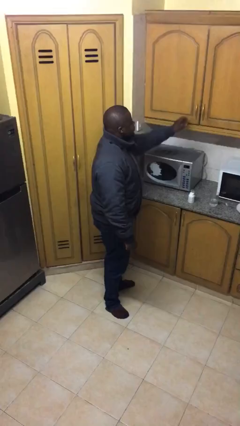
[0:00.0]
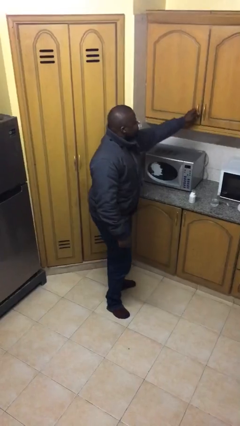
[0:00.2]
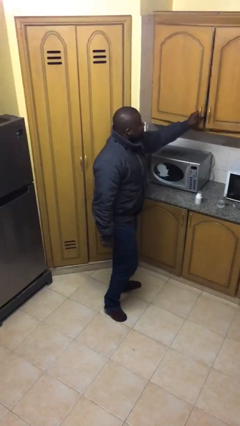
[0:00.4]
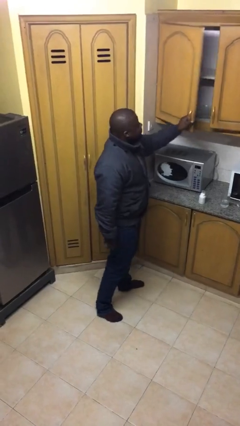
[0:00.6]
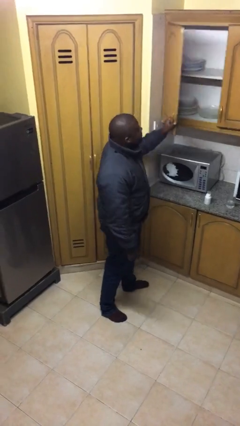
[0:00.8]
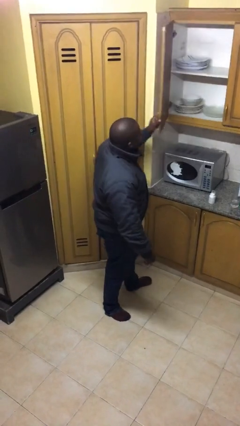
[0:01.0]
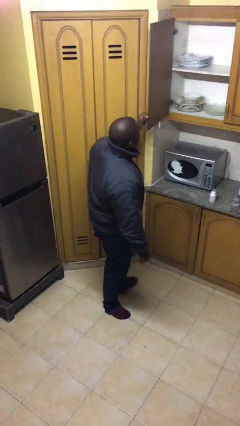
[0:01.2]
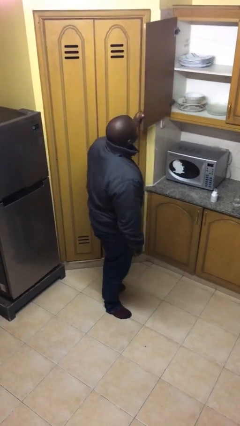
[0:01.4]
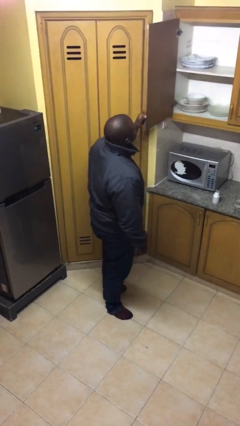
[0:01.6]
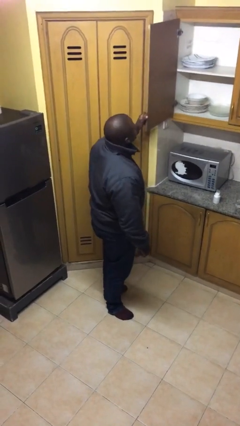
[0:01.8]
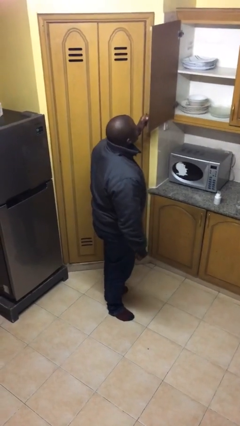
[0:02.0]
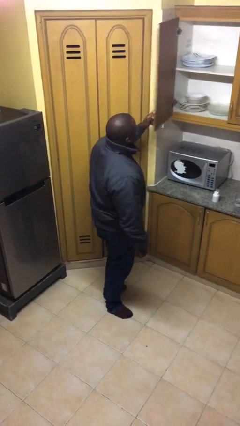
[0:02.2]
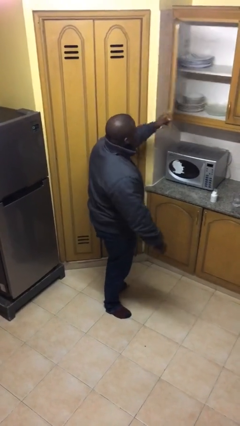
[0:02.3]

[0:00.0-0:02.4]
person closes cabinet

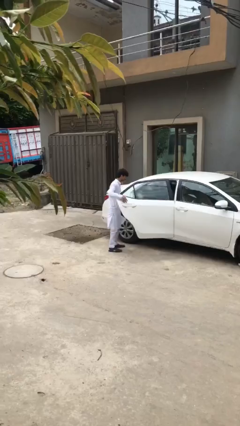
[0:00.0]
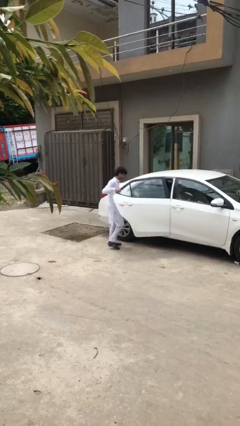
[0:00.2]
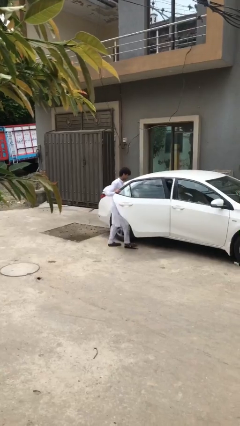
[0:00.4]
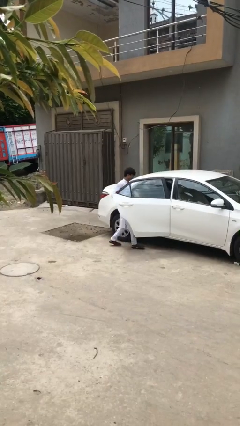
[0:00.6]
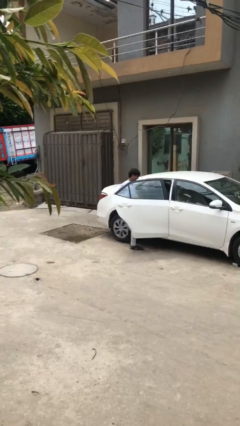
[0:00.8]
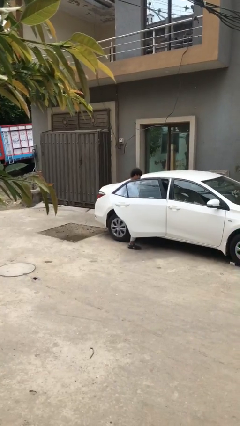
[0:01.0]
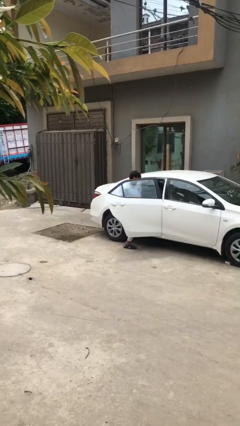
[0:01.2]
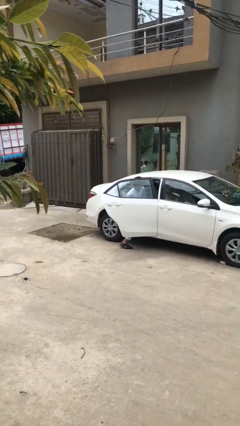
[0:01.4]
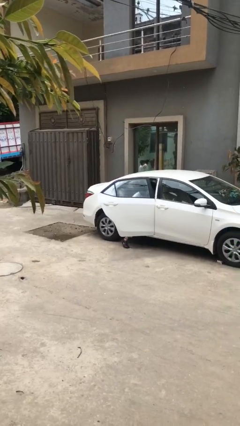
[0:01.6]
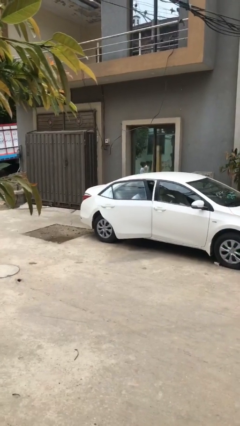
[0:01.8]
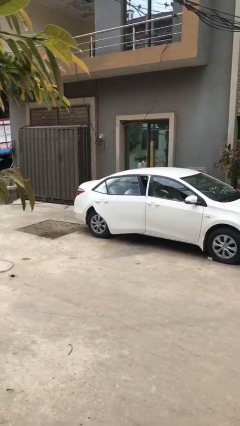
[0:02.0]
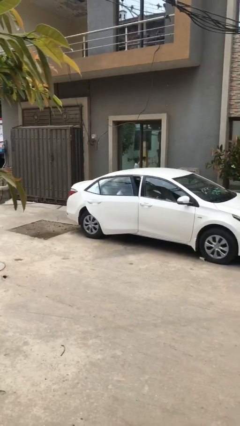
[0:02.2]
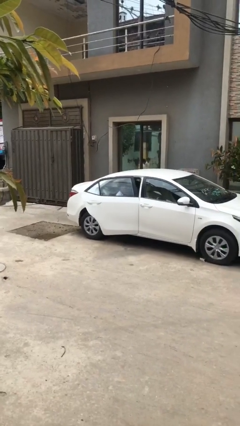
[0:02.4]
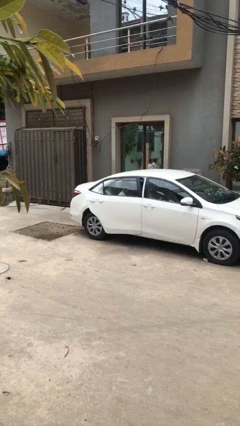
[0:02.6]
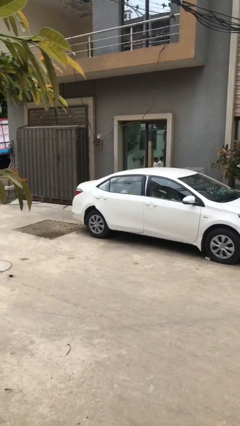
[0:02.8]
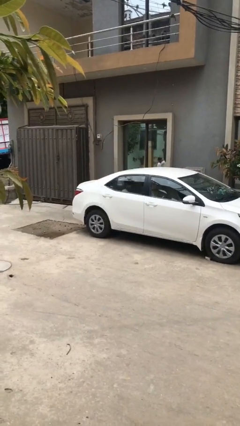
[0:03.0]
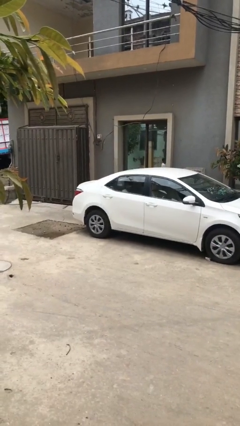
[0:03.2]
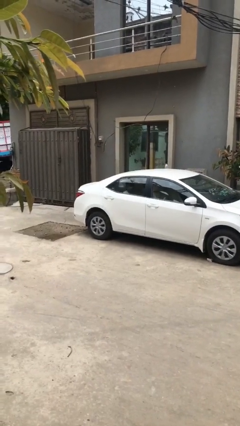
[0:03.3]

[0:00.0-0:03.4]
person enters car

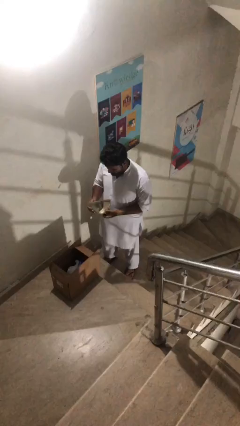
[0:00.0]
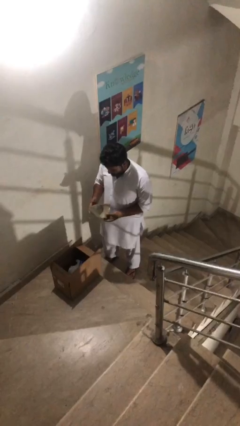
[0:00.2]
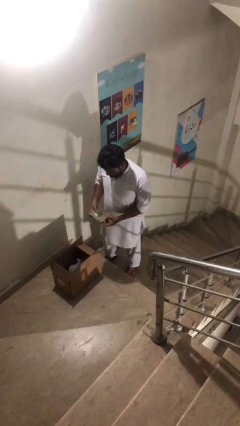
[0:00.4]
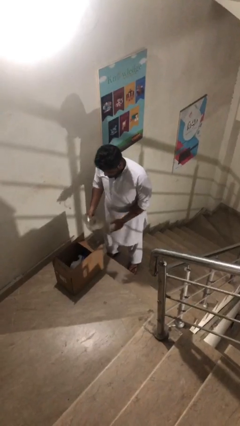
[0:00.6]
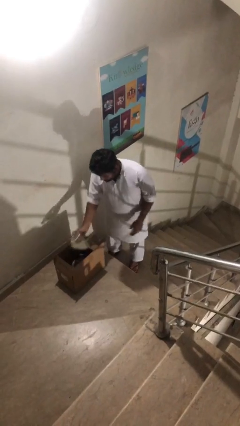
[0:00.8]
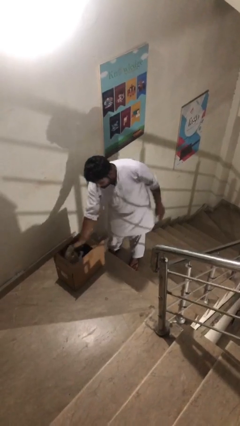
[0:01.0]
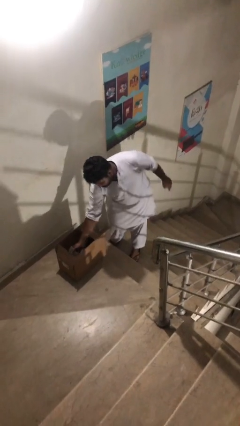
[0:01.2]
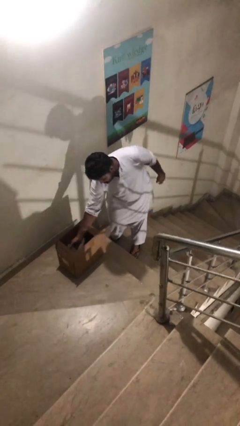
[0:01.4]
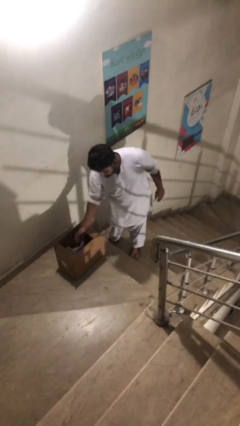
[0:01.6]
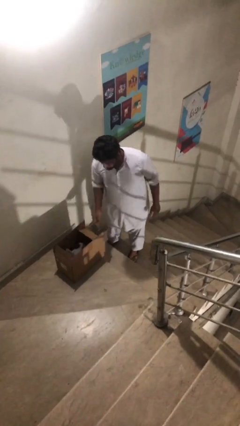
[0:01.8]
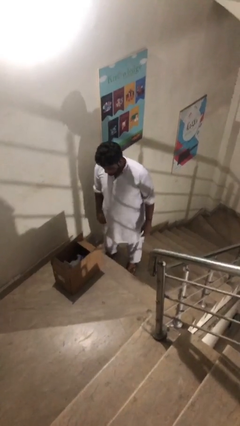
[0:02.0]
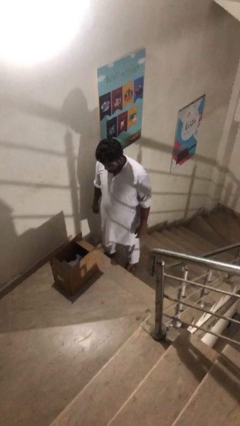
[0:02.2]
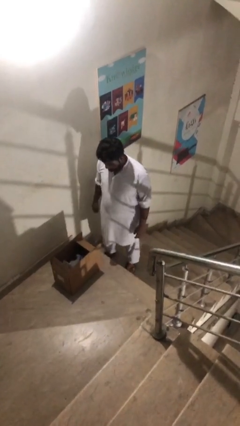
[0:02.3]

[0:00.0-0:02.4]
person puts object into box

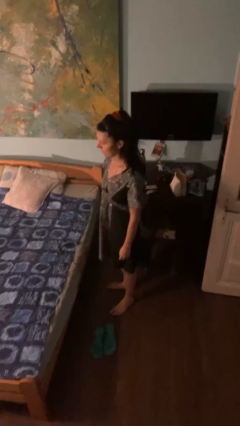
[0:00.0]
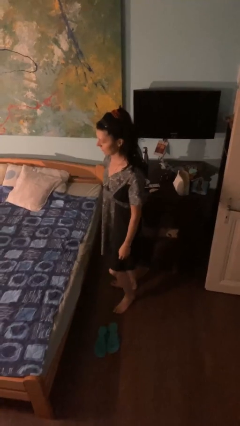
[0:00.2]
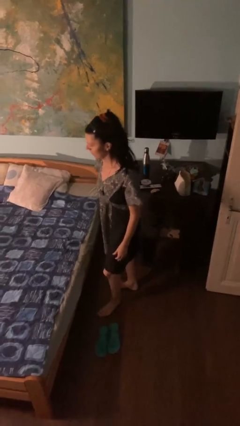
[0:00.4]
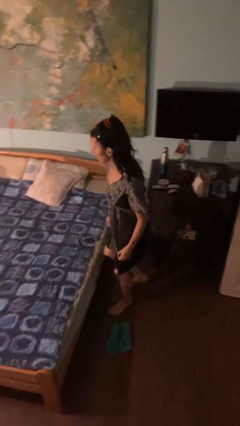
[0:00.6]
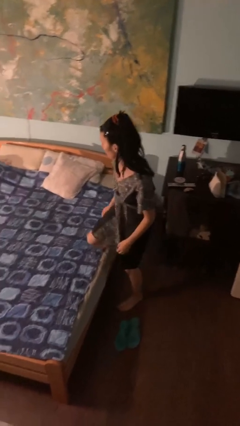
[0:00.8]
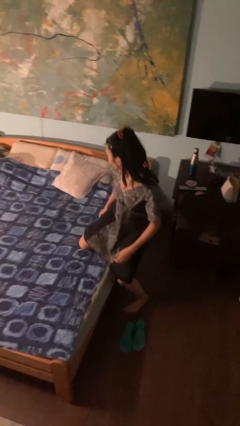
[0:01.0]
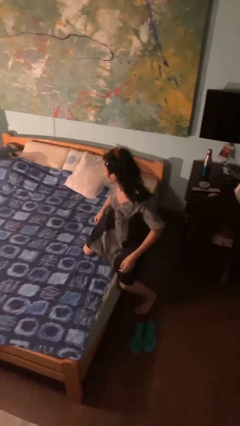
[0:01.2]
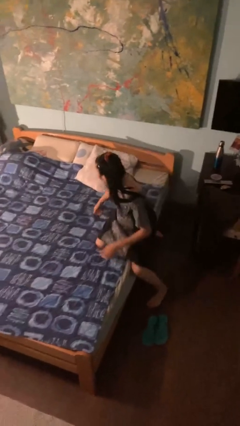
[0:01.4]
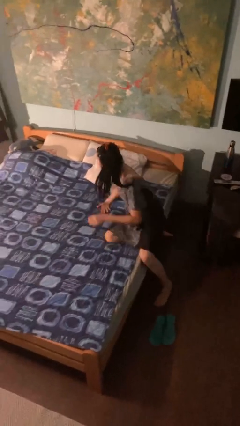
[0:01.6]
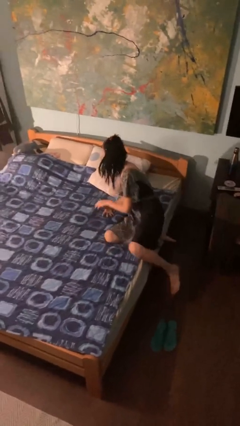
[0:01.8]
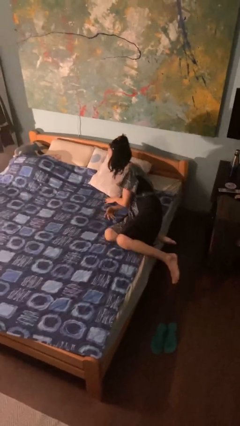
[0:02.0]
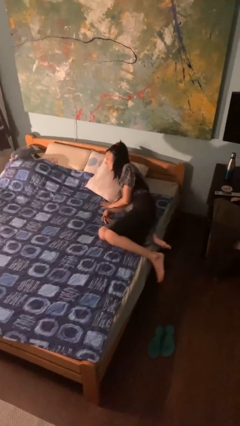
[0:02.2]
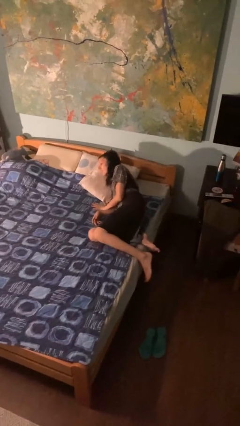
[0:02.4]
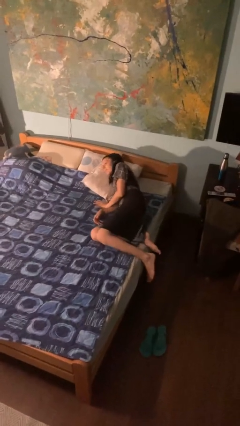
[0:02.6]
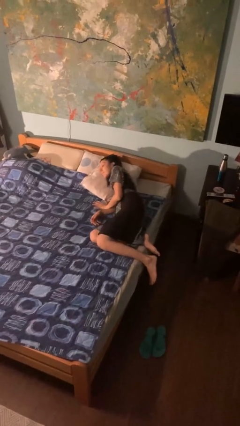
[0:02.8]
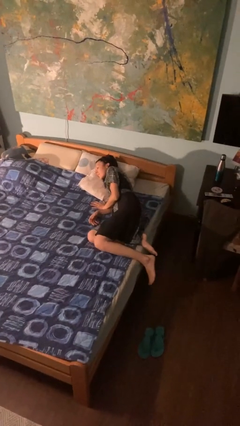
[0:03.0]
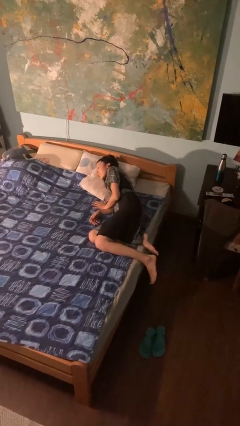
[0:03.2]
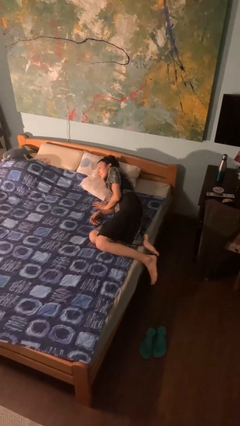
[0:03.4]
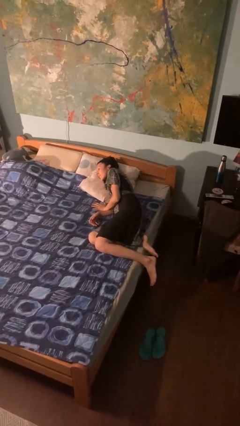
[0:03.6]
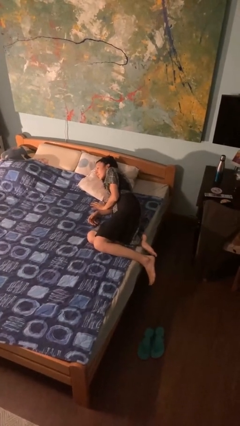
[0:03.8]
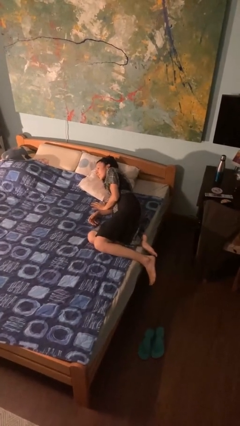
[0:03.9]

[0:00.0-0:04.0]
person lies down on bed

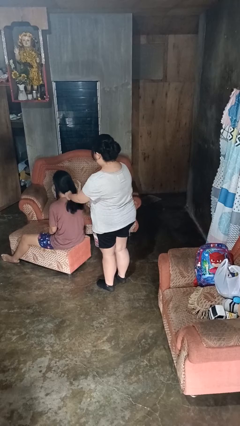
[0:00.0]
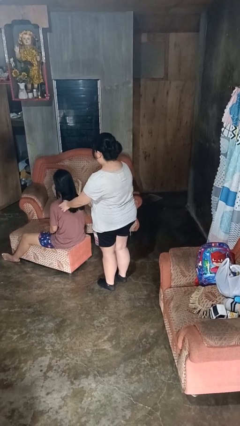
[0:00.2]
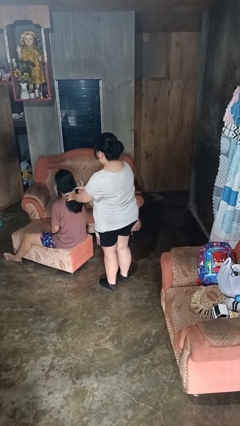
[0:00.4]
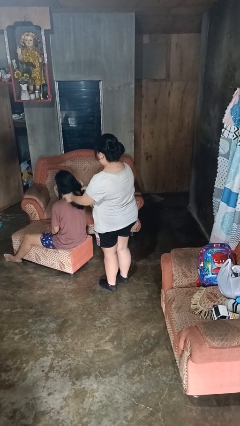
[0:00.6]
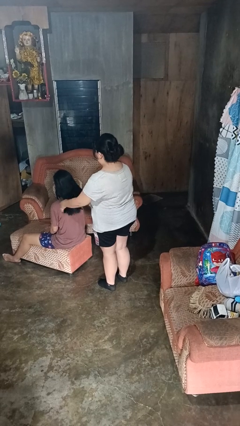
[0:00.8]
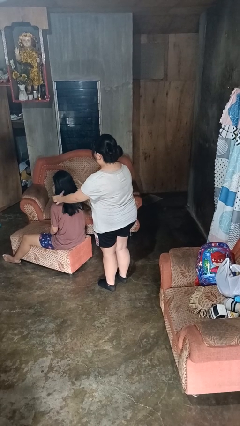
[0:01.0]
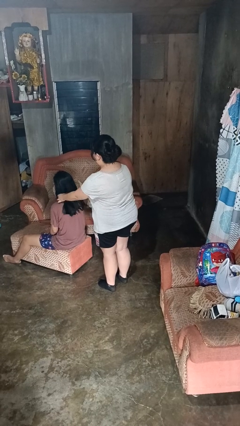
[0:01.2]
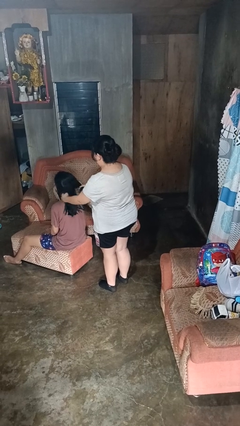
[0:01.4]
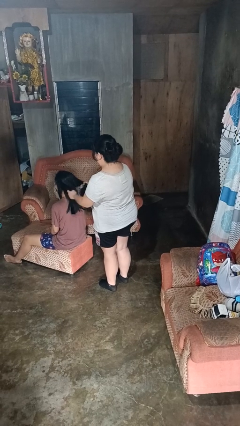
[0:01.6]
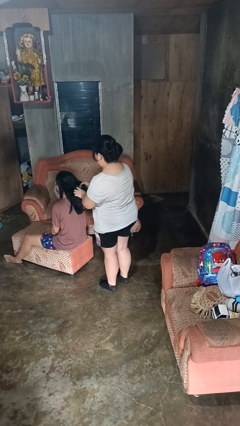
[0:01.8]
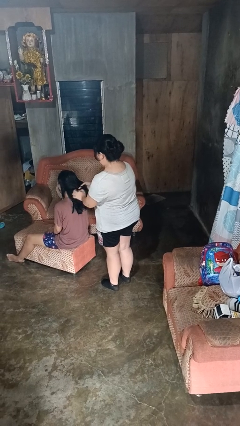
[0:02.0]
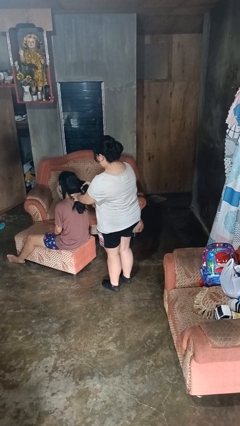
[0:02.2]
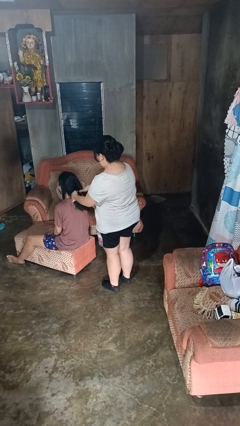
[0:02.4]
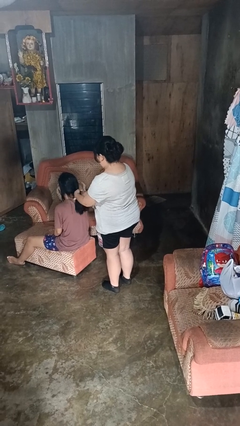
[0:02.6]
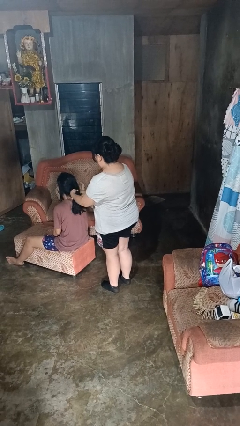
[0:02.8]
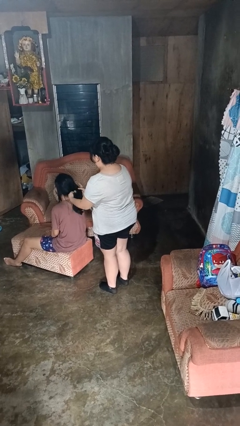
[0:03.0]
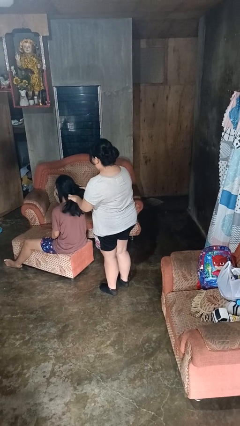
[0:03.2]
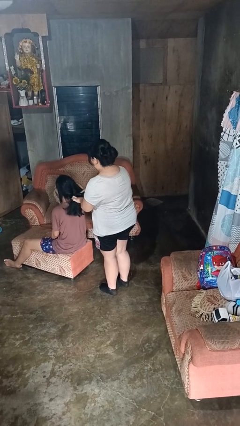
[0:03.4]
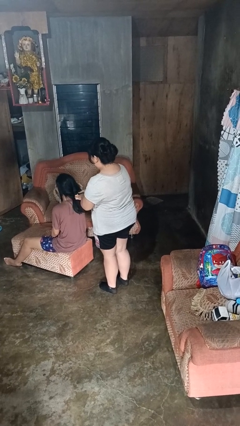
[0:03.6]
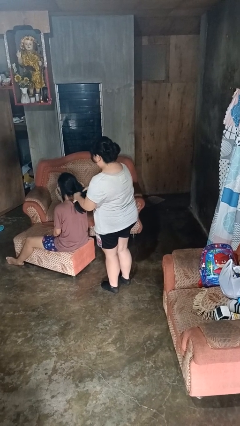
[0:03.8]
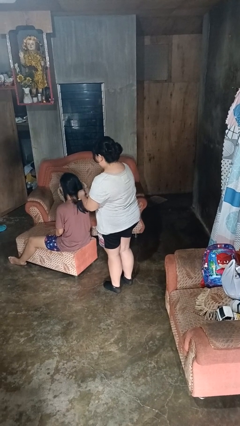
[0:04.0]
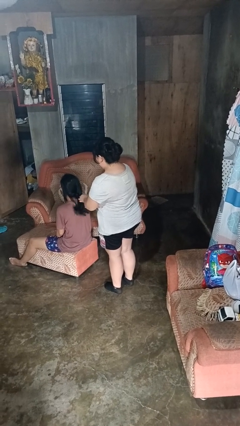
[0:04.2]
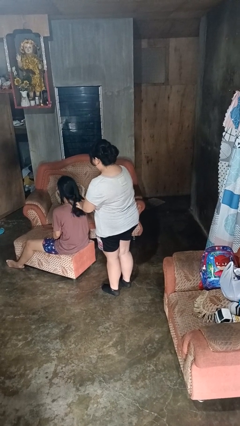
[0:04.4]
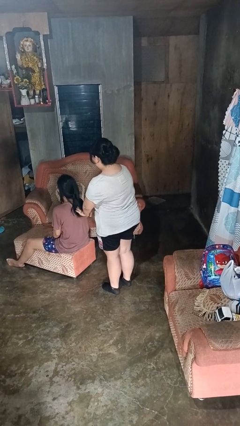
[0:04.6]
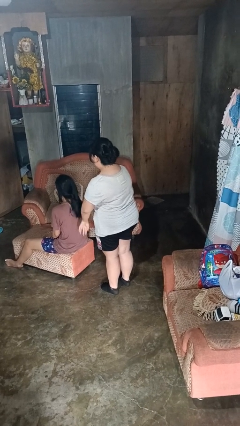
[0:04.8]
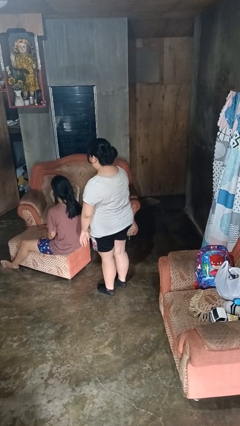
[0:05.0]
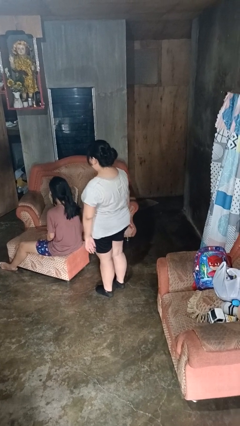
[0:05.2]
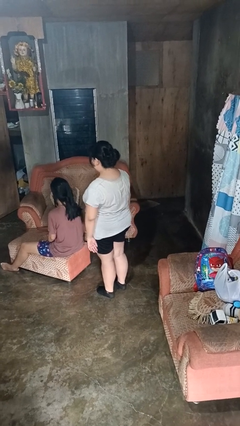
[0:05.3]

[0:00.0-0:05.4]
person braids hair of person
